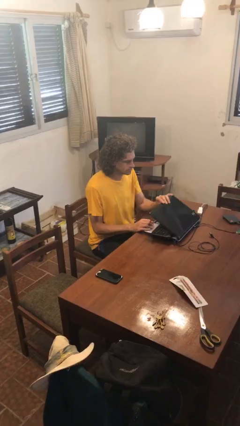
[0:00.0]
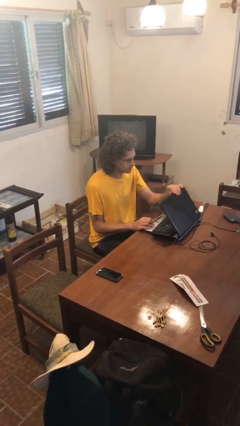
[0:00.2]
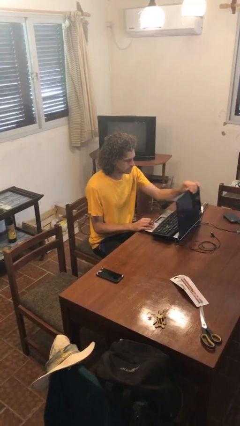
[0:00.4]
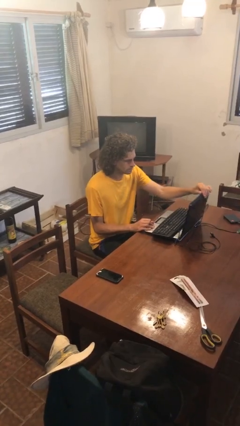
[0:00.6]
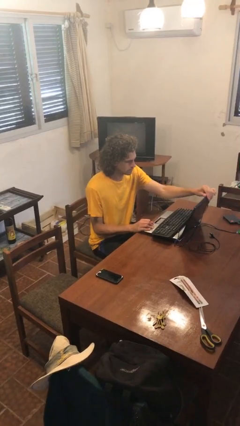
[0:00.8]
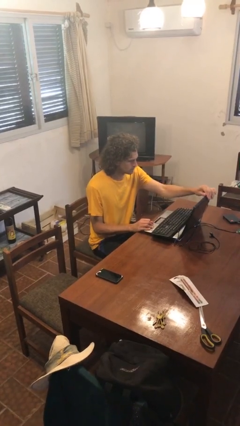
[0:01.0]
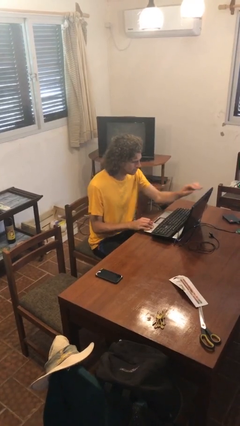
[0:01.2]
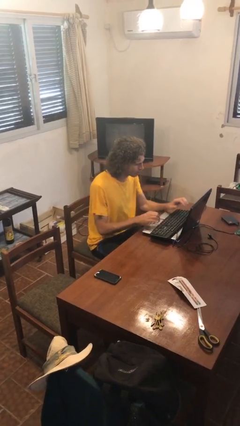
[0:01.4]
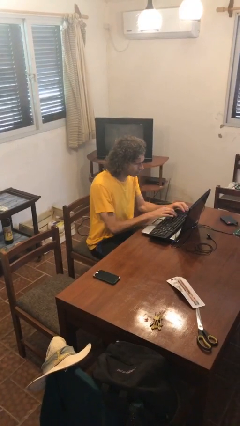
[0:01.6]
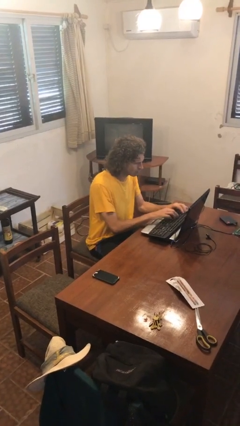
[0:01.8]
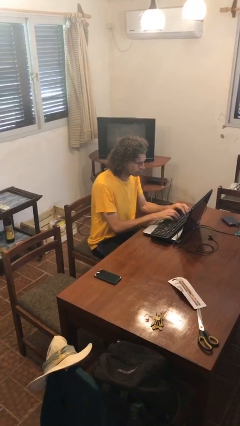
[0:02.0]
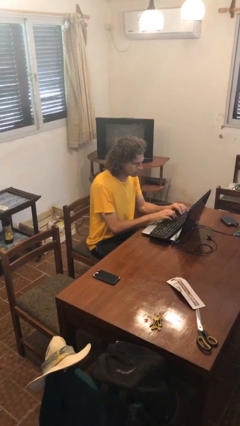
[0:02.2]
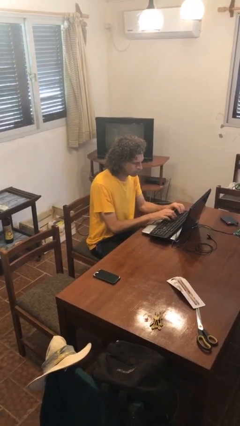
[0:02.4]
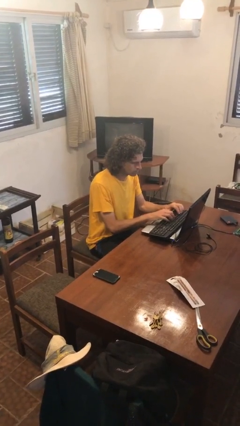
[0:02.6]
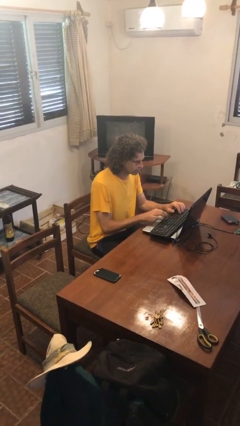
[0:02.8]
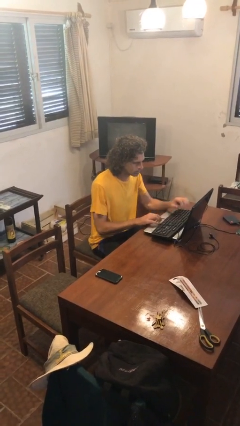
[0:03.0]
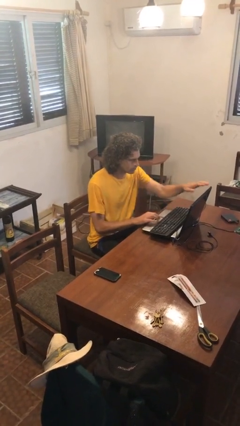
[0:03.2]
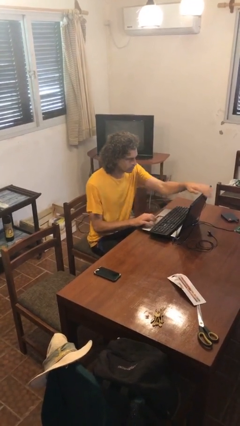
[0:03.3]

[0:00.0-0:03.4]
person interacts with laptop

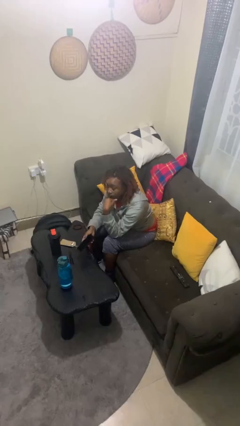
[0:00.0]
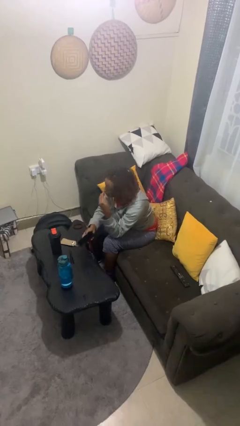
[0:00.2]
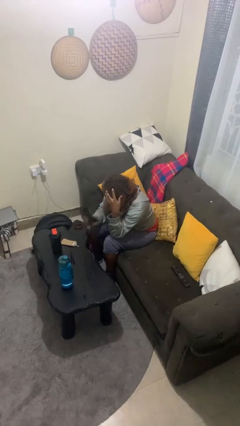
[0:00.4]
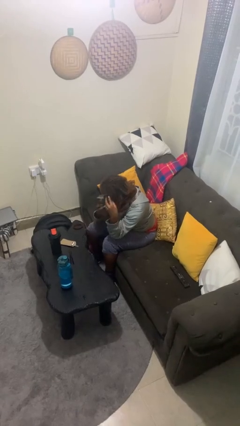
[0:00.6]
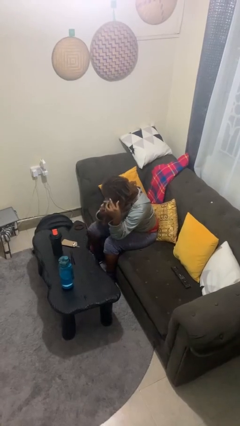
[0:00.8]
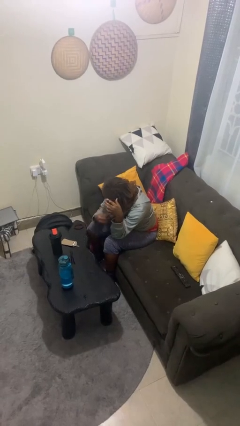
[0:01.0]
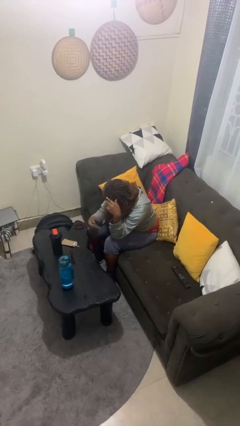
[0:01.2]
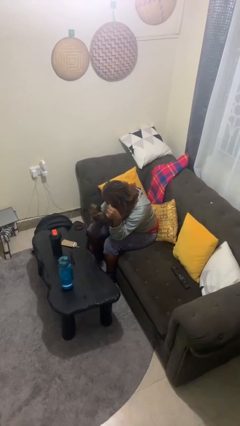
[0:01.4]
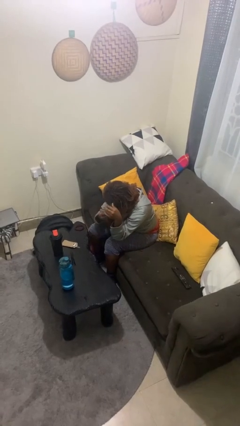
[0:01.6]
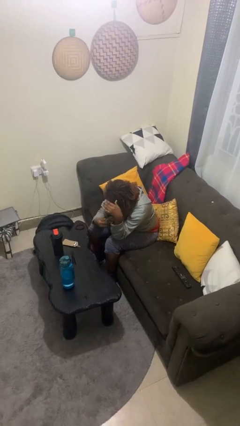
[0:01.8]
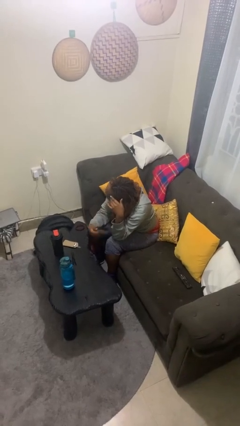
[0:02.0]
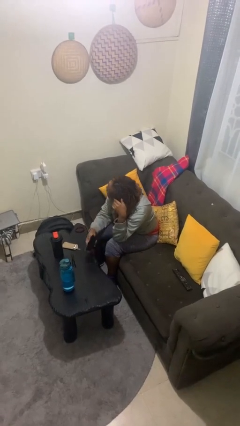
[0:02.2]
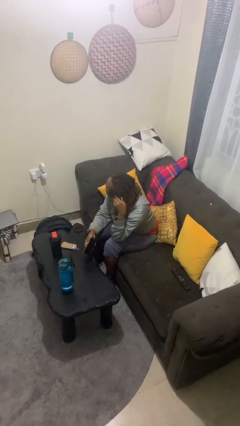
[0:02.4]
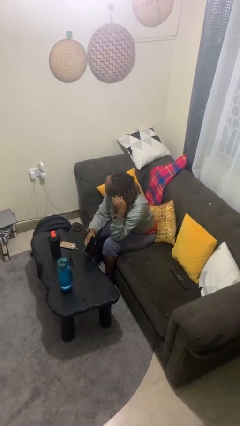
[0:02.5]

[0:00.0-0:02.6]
person brushes hair

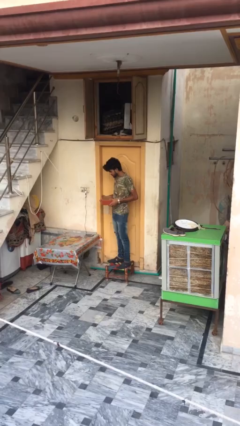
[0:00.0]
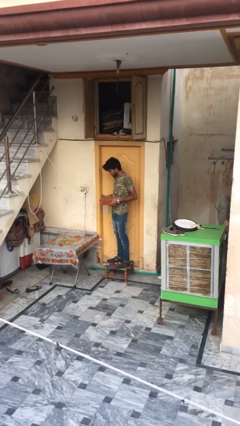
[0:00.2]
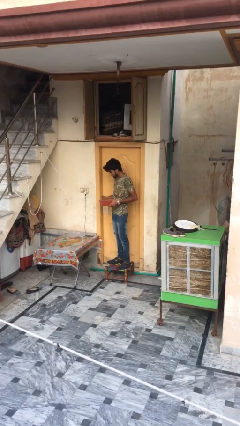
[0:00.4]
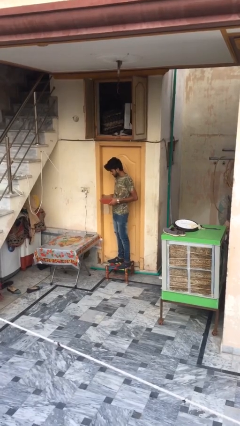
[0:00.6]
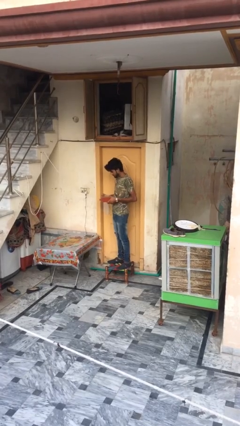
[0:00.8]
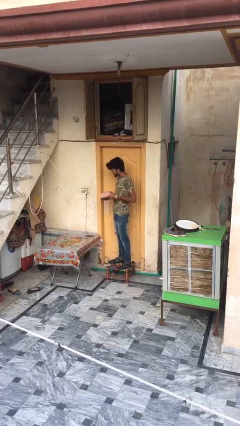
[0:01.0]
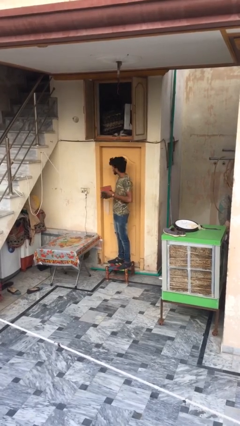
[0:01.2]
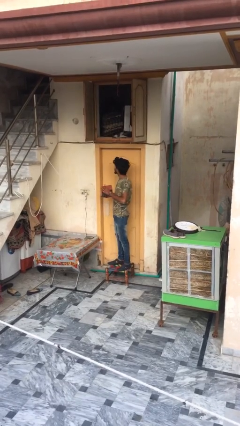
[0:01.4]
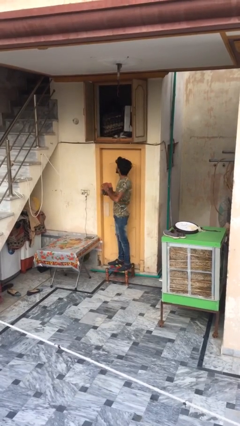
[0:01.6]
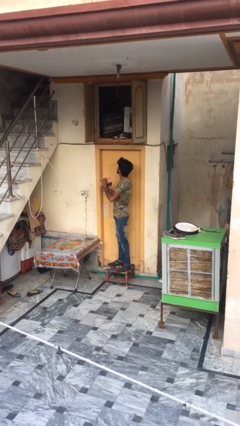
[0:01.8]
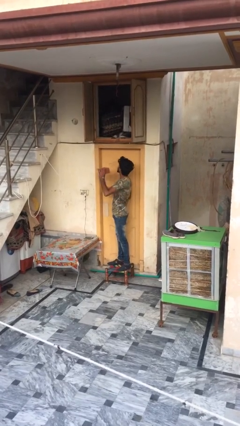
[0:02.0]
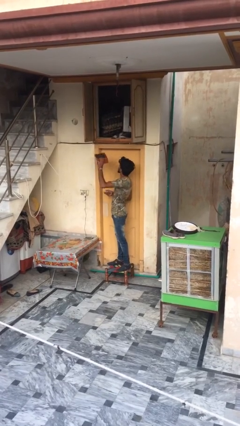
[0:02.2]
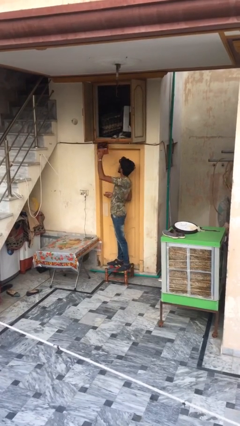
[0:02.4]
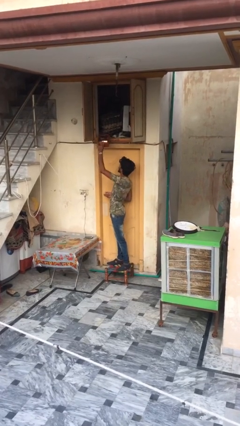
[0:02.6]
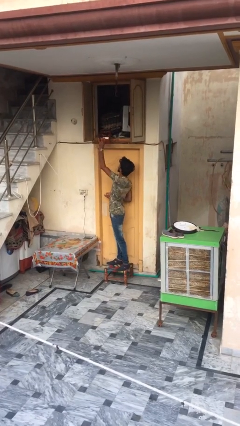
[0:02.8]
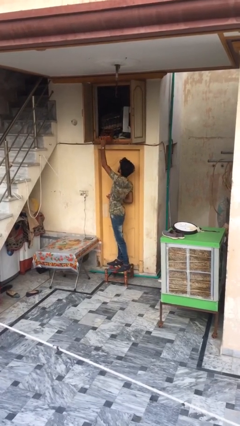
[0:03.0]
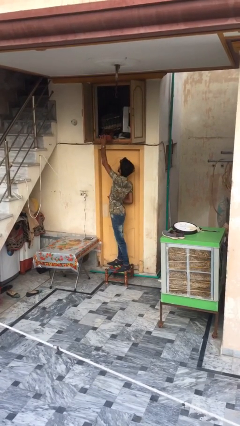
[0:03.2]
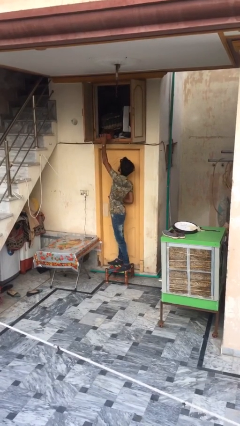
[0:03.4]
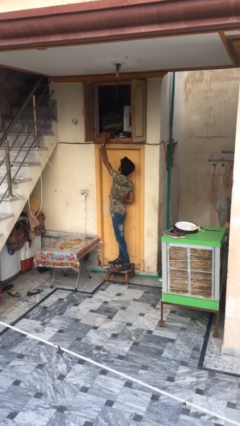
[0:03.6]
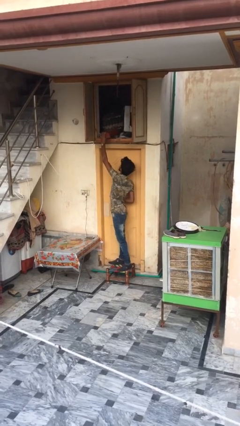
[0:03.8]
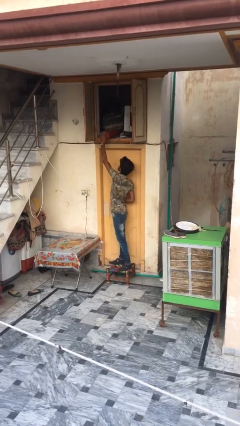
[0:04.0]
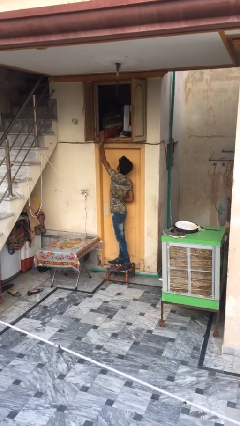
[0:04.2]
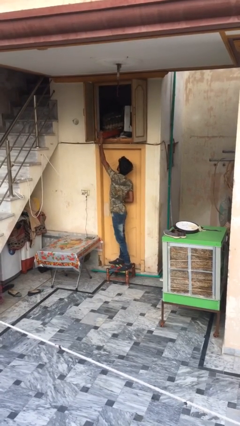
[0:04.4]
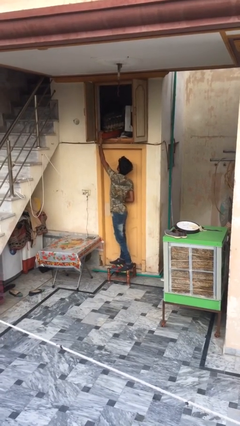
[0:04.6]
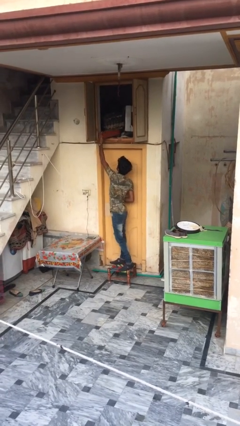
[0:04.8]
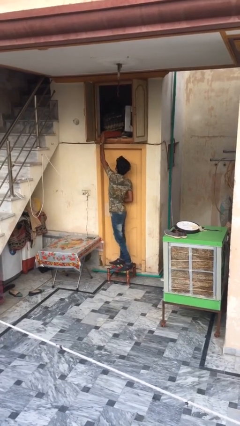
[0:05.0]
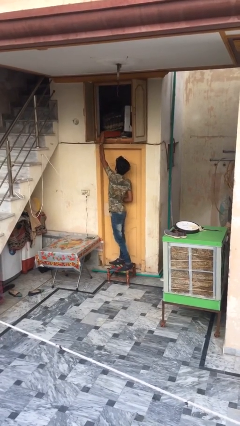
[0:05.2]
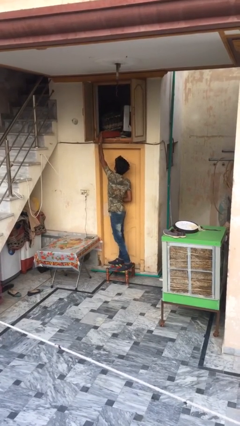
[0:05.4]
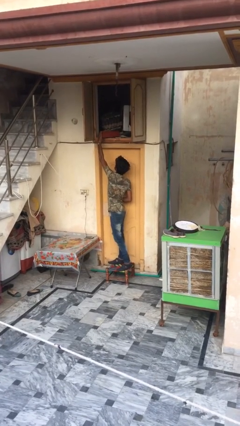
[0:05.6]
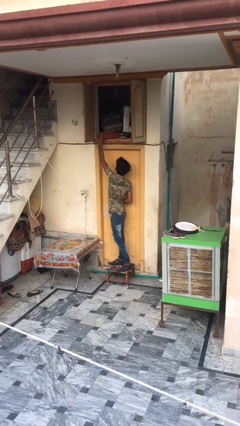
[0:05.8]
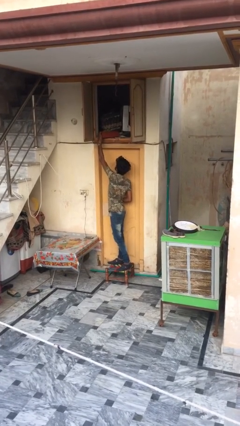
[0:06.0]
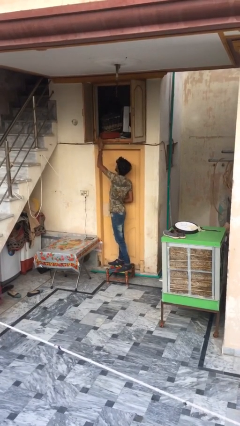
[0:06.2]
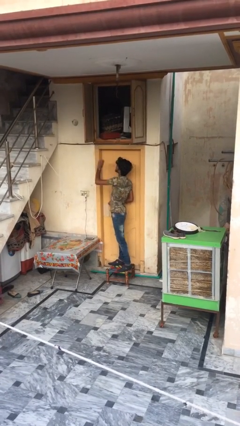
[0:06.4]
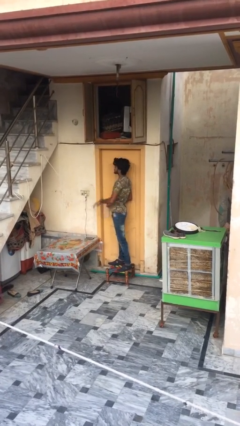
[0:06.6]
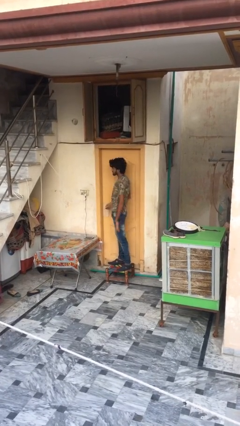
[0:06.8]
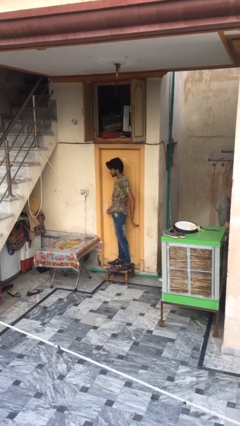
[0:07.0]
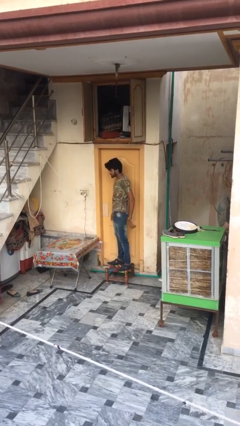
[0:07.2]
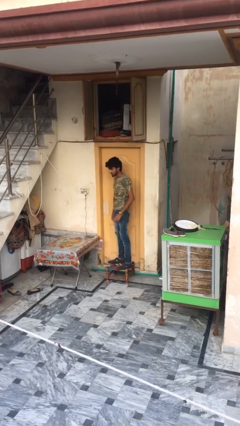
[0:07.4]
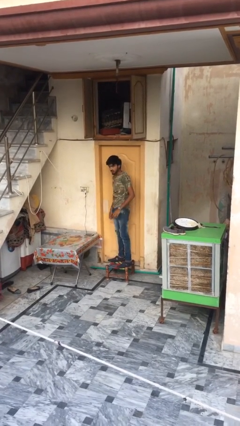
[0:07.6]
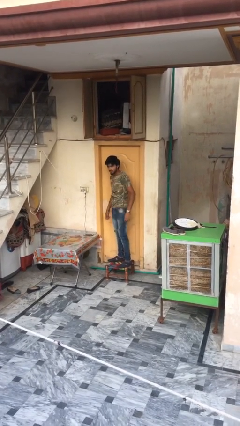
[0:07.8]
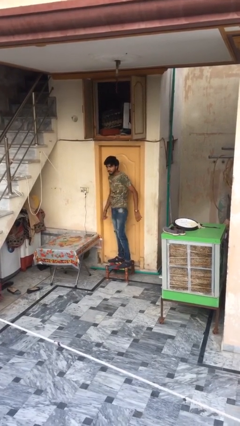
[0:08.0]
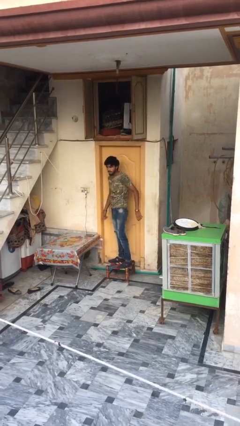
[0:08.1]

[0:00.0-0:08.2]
person puts down object on shelf

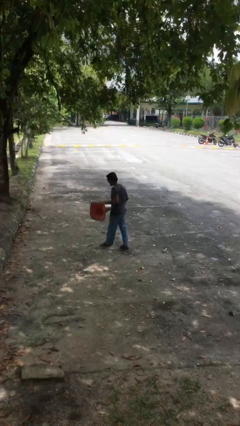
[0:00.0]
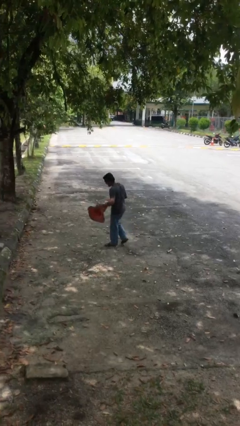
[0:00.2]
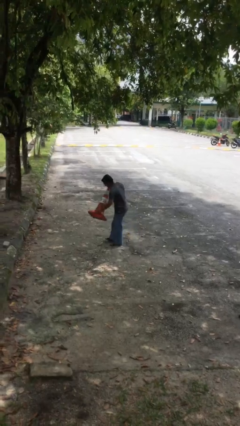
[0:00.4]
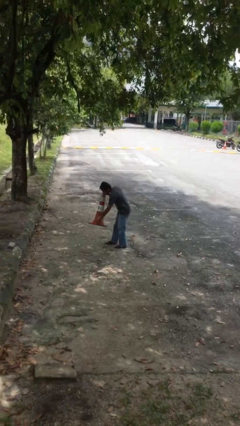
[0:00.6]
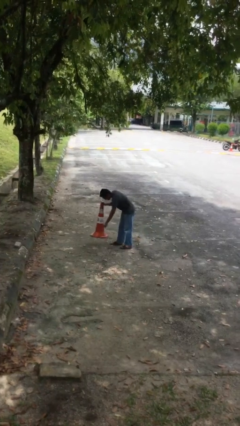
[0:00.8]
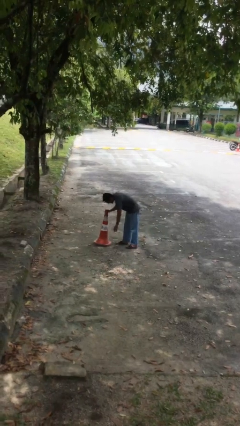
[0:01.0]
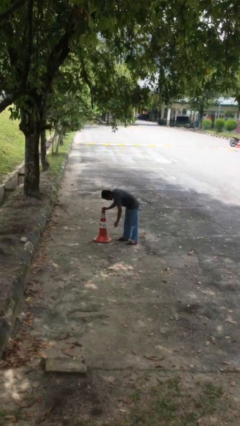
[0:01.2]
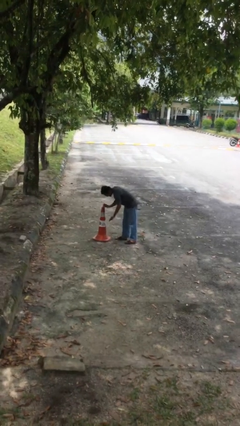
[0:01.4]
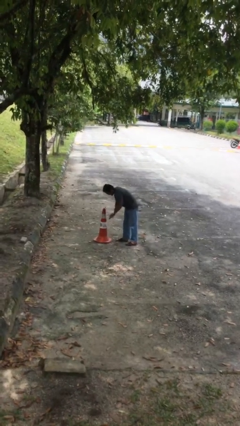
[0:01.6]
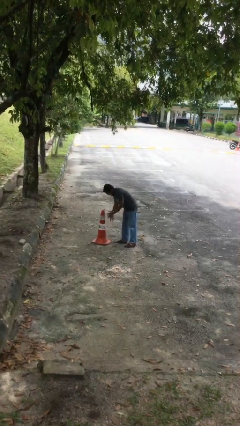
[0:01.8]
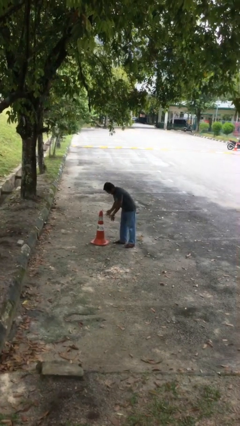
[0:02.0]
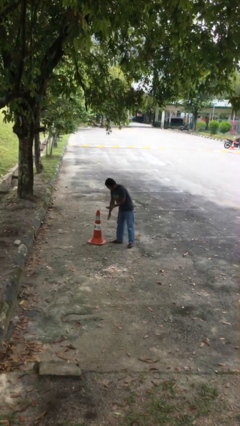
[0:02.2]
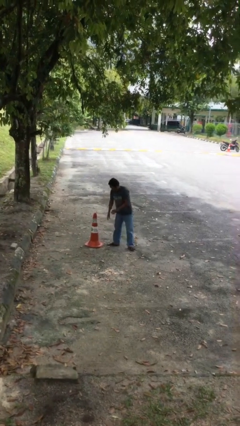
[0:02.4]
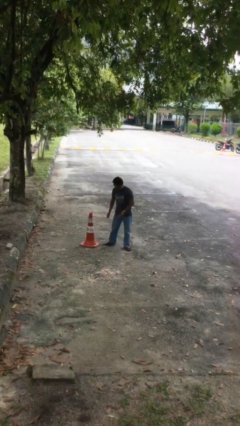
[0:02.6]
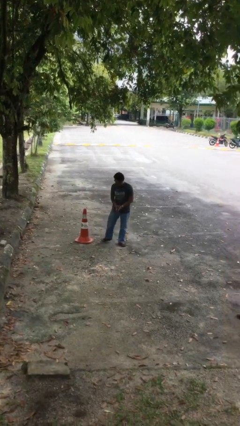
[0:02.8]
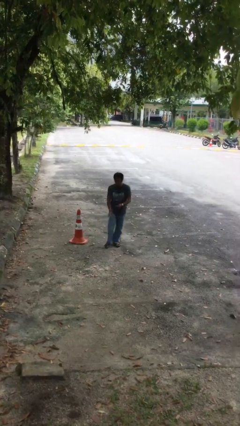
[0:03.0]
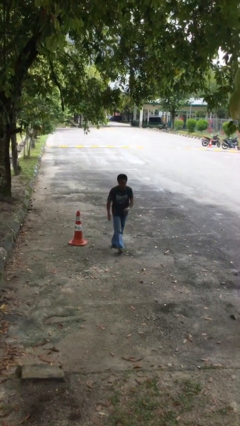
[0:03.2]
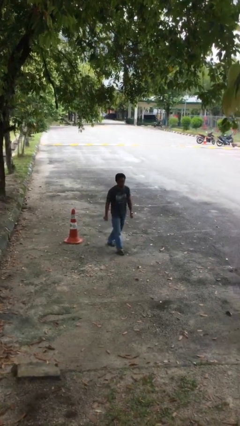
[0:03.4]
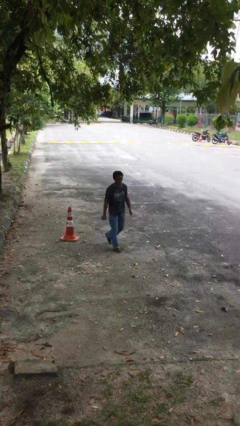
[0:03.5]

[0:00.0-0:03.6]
person puts down object on floor
